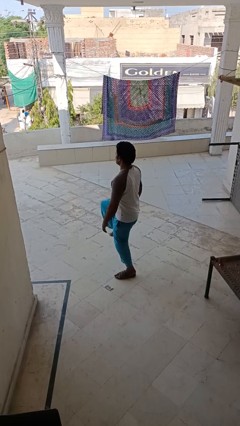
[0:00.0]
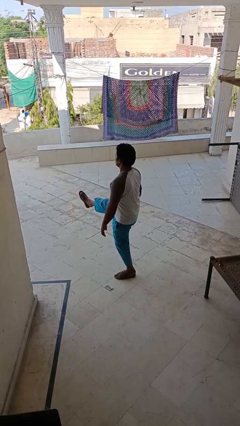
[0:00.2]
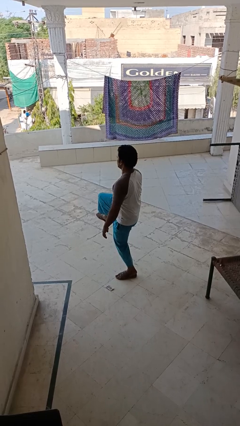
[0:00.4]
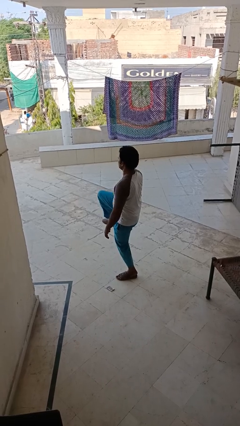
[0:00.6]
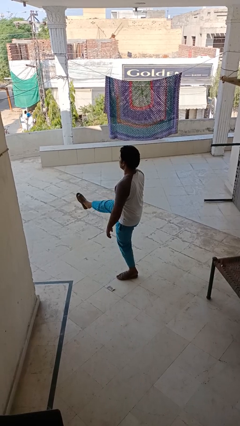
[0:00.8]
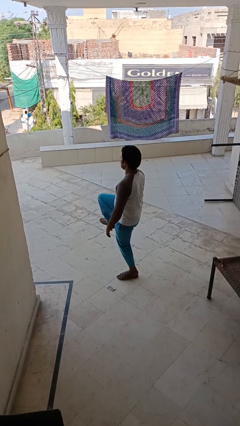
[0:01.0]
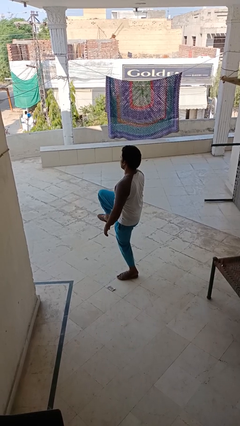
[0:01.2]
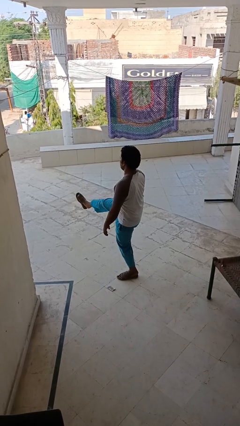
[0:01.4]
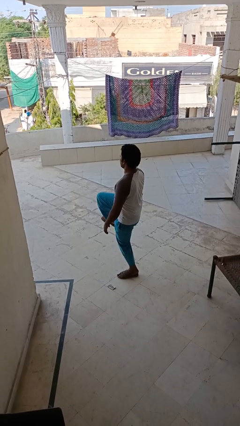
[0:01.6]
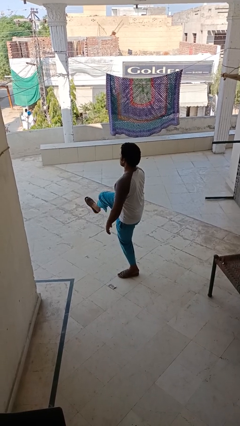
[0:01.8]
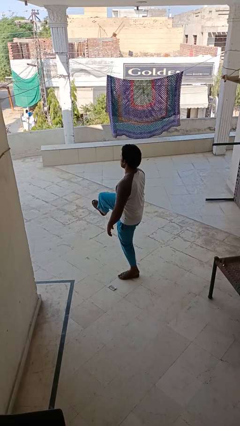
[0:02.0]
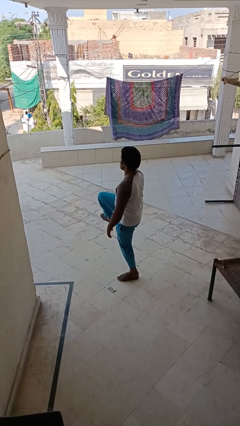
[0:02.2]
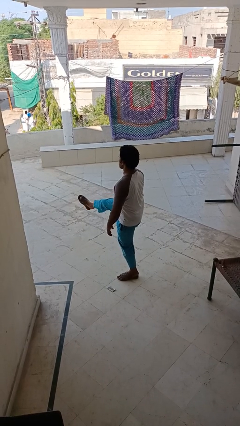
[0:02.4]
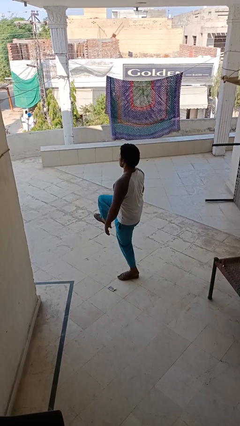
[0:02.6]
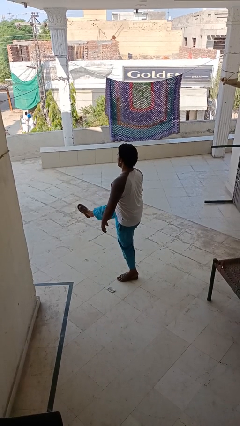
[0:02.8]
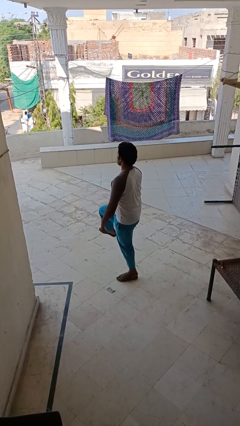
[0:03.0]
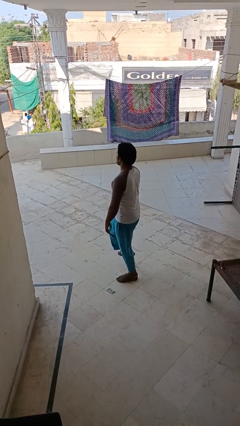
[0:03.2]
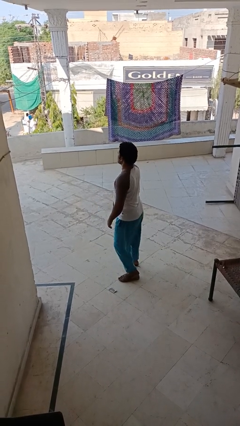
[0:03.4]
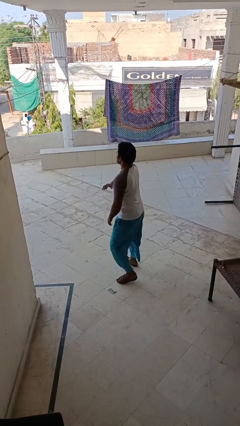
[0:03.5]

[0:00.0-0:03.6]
person karate kicks

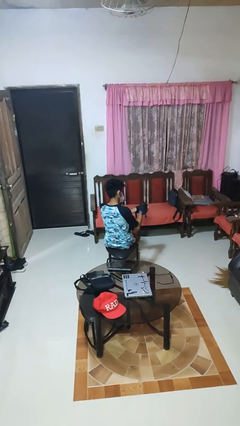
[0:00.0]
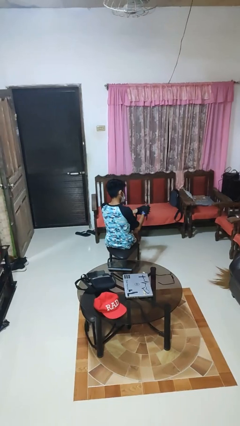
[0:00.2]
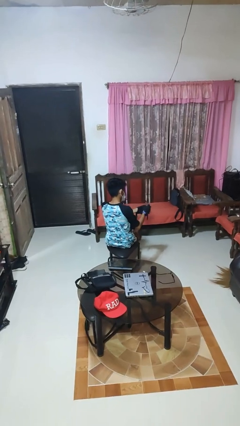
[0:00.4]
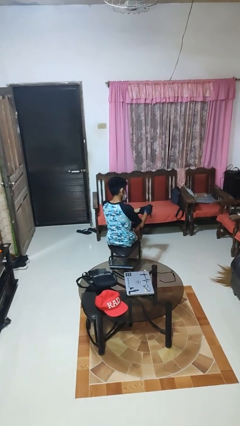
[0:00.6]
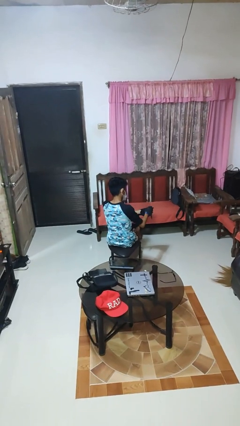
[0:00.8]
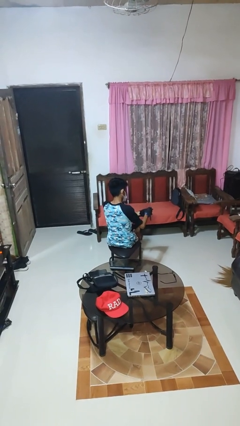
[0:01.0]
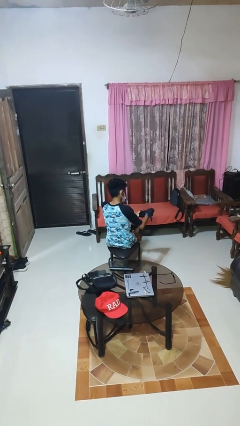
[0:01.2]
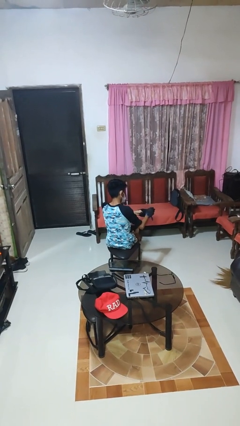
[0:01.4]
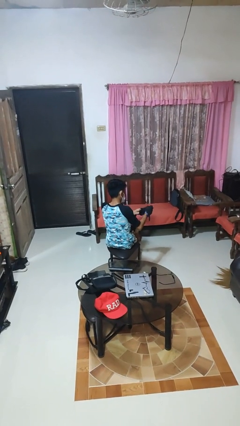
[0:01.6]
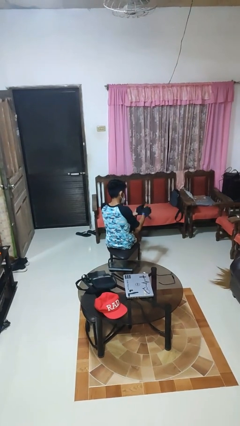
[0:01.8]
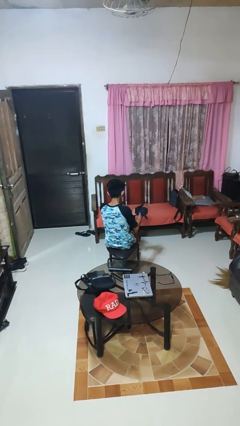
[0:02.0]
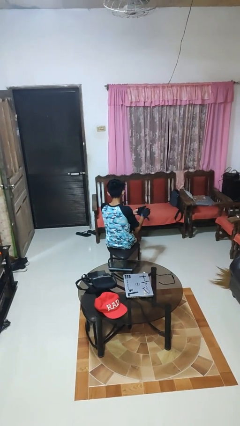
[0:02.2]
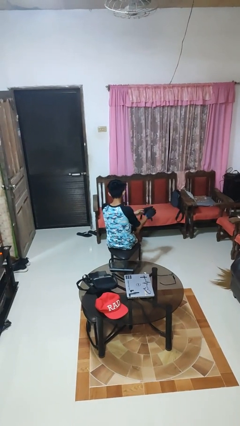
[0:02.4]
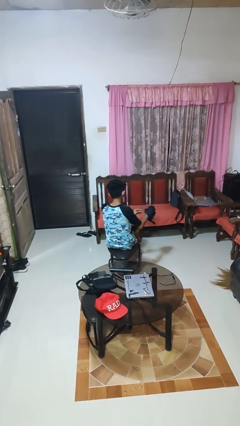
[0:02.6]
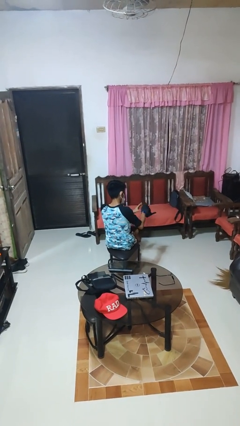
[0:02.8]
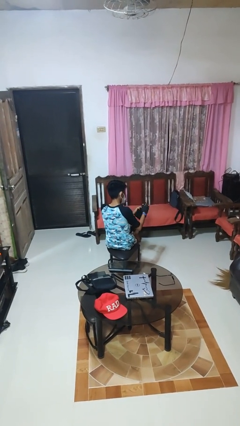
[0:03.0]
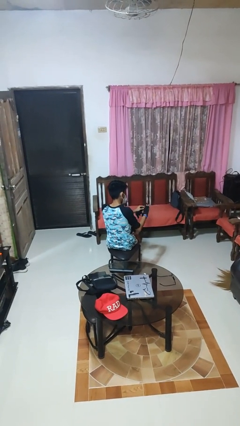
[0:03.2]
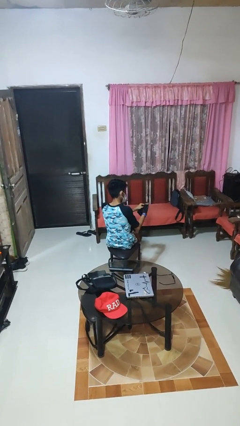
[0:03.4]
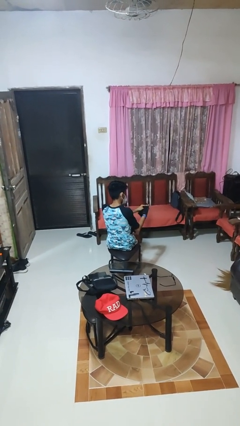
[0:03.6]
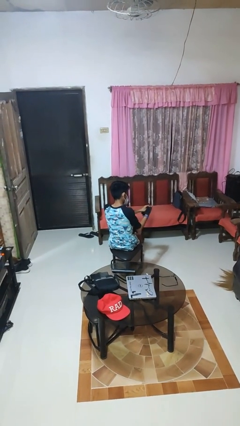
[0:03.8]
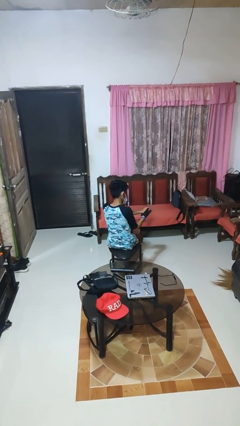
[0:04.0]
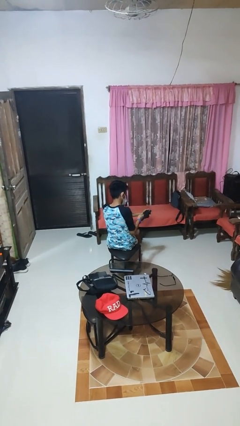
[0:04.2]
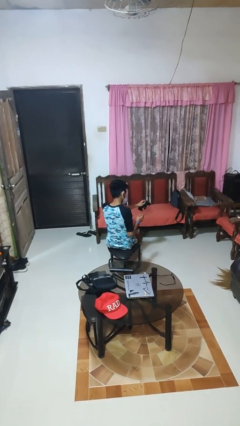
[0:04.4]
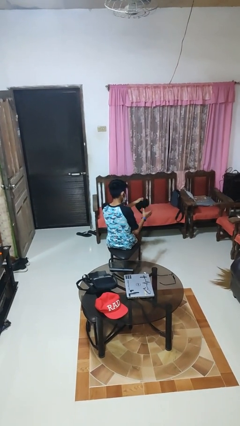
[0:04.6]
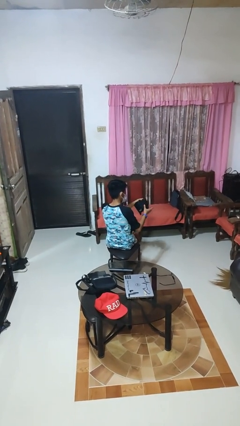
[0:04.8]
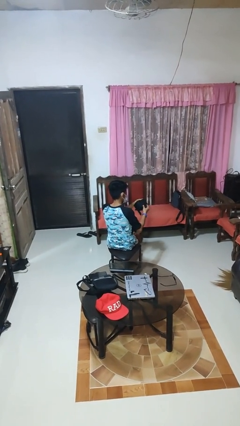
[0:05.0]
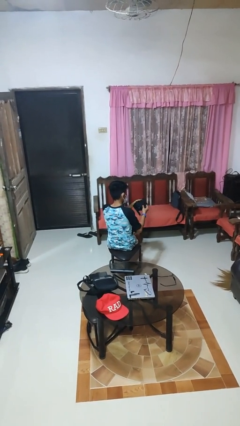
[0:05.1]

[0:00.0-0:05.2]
person takes off gloves

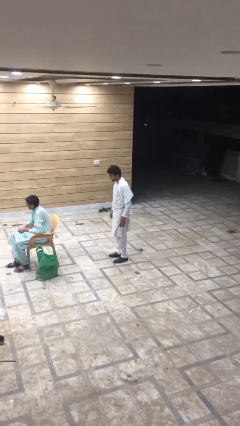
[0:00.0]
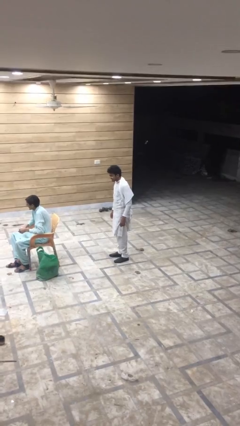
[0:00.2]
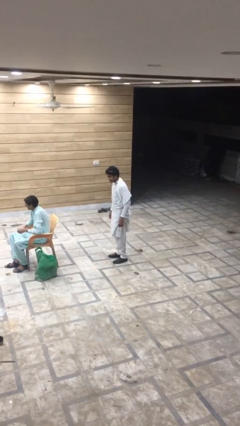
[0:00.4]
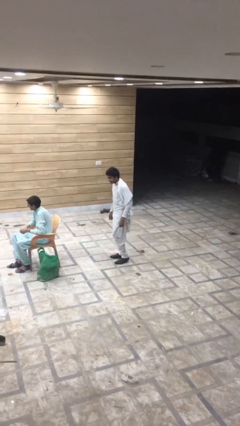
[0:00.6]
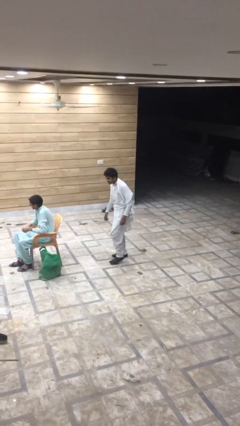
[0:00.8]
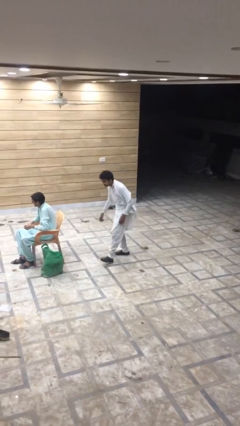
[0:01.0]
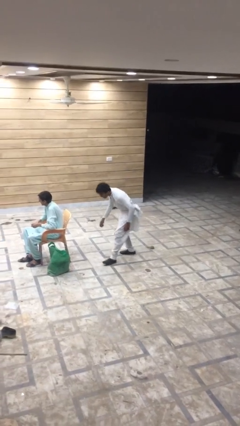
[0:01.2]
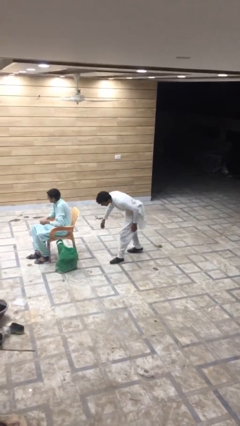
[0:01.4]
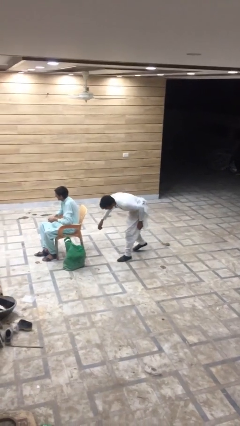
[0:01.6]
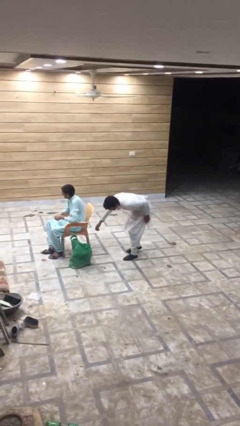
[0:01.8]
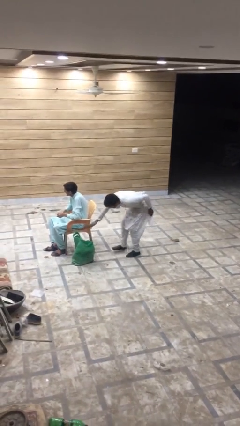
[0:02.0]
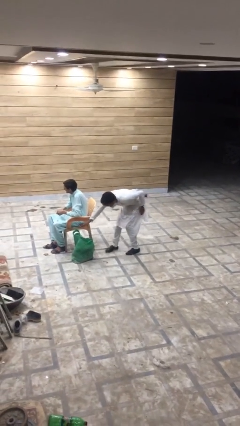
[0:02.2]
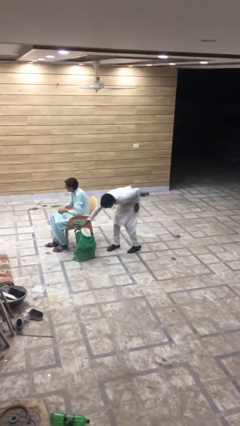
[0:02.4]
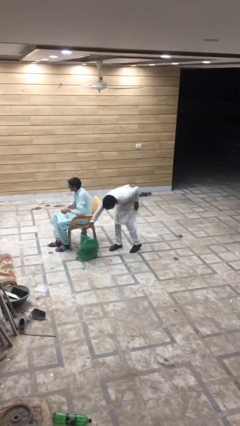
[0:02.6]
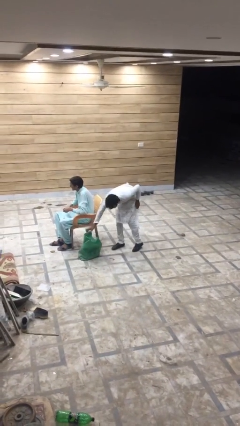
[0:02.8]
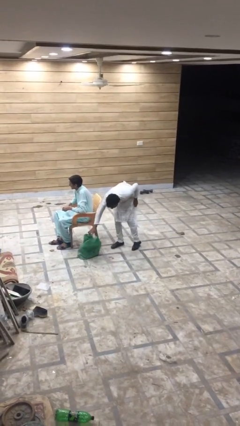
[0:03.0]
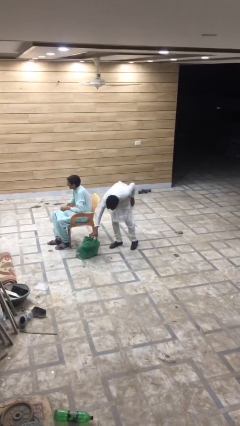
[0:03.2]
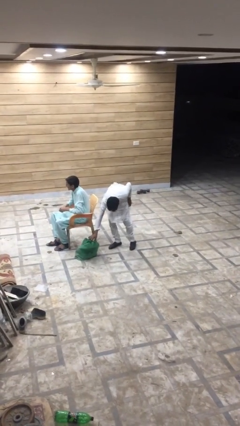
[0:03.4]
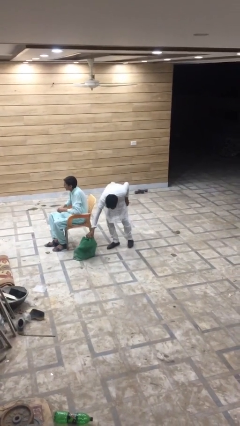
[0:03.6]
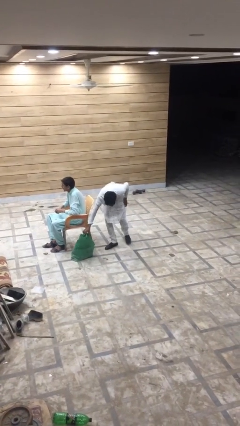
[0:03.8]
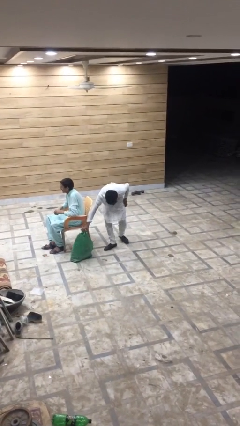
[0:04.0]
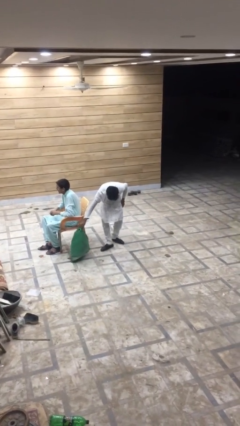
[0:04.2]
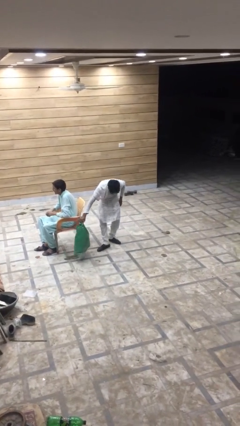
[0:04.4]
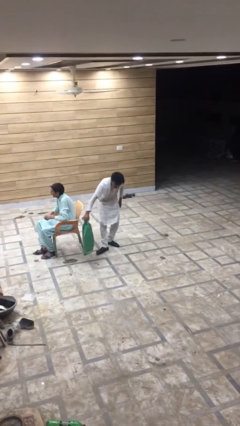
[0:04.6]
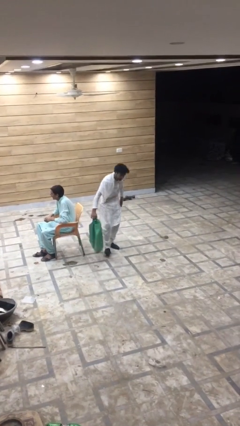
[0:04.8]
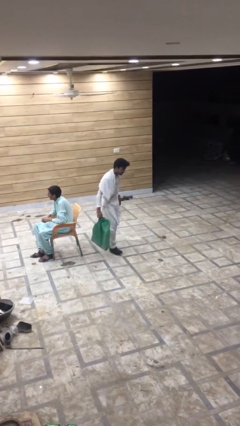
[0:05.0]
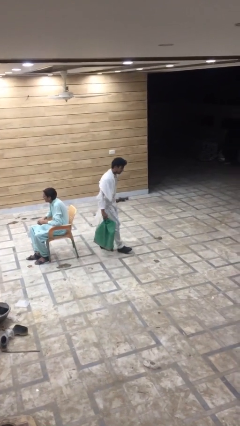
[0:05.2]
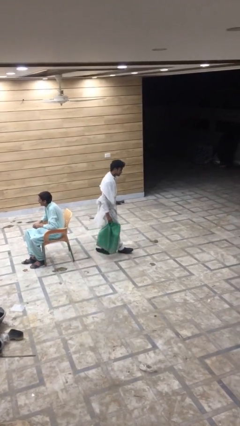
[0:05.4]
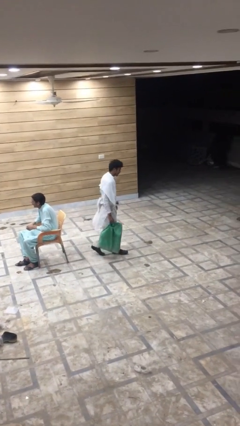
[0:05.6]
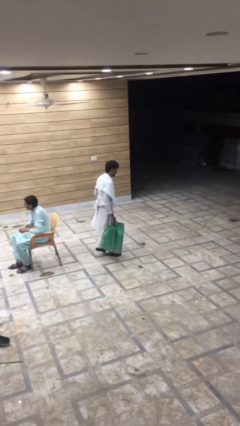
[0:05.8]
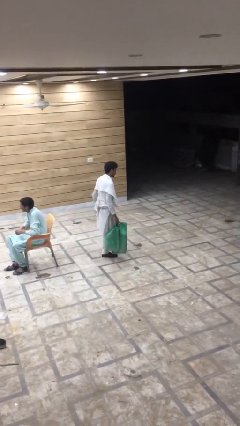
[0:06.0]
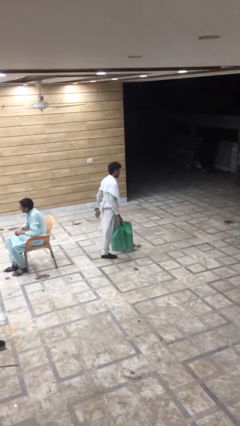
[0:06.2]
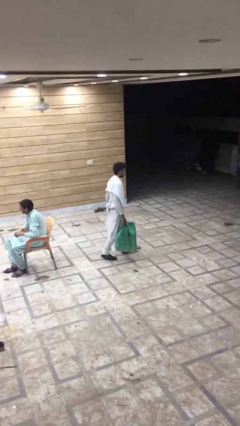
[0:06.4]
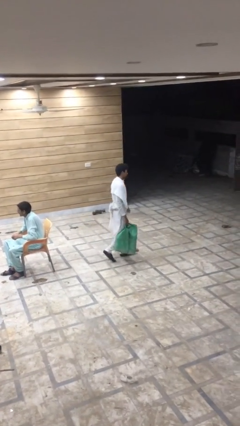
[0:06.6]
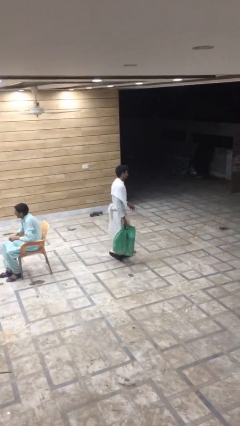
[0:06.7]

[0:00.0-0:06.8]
person steals object from person

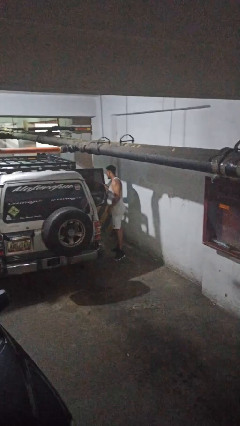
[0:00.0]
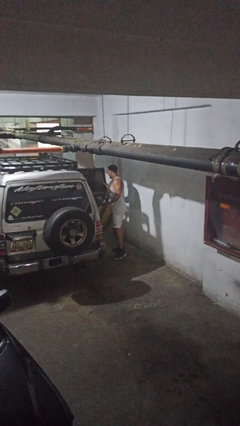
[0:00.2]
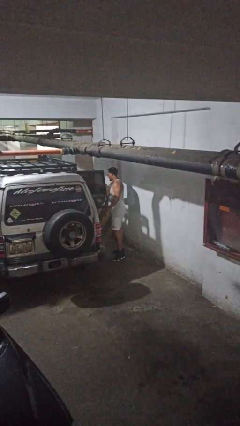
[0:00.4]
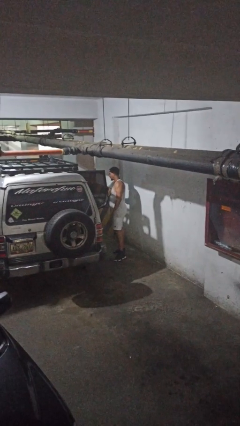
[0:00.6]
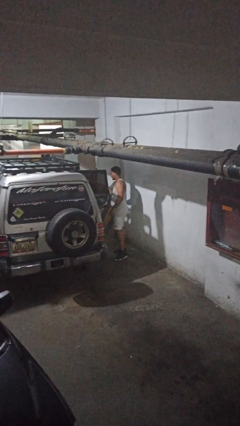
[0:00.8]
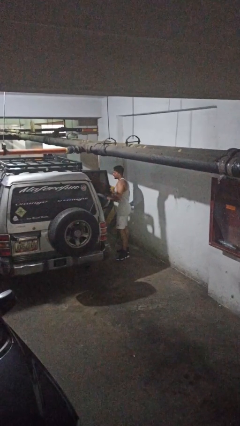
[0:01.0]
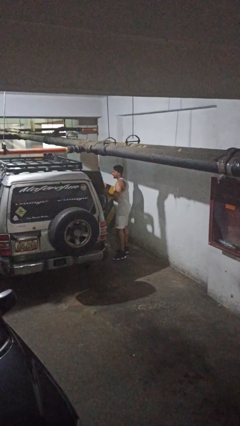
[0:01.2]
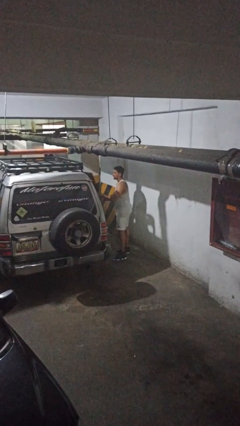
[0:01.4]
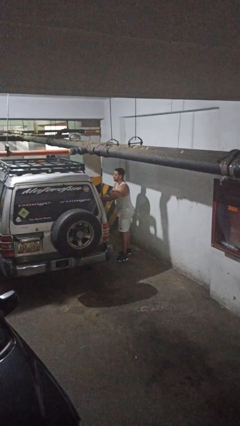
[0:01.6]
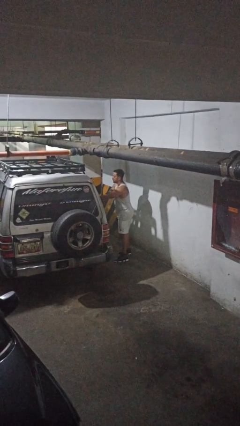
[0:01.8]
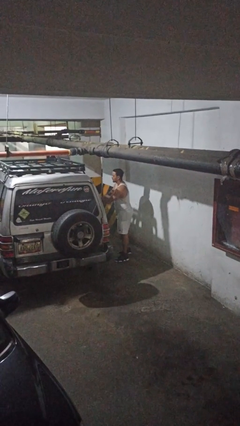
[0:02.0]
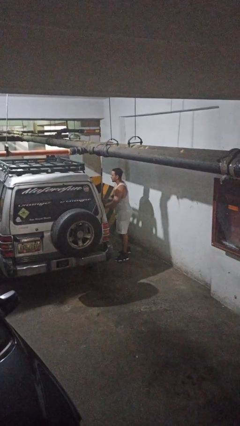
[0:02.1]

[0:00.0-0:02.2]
person closes car door
